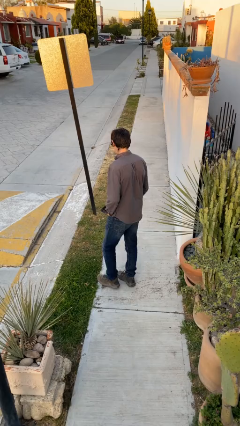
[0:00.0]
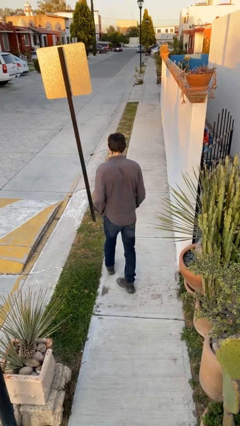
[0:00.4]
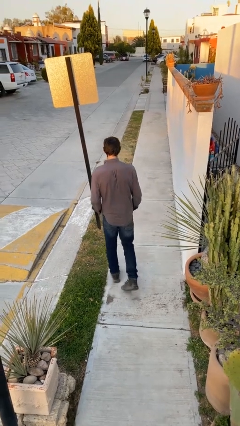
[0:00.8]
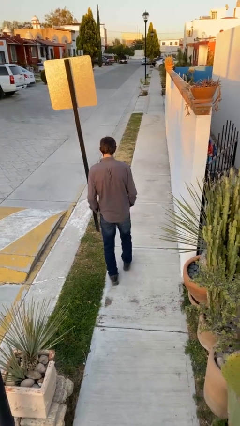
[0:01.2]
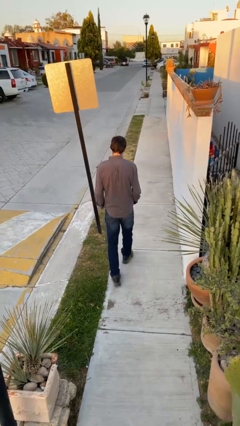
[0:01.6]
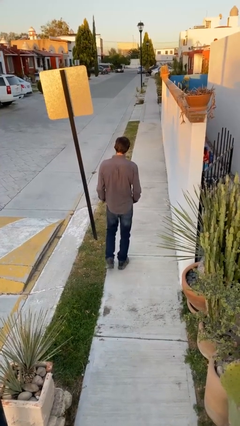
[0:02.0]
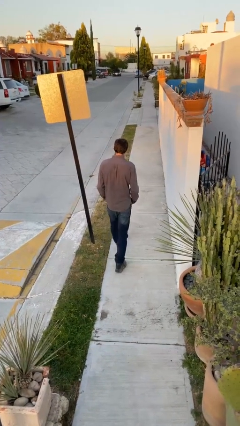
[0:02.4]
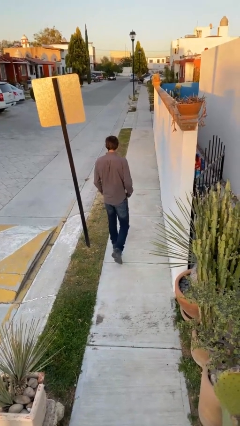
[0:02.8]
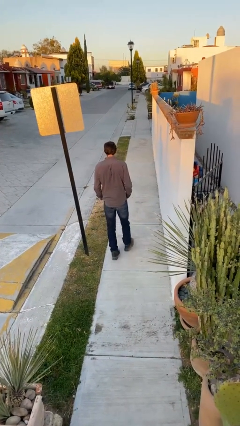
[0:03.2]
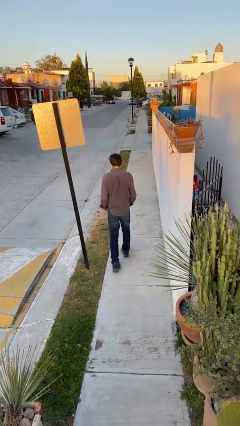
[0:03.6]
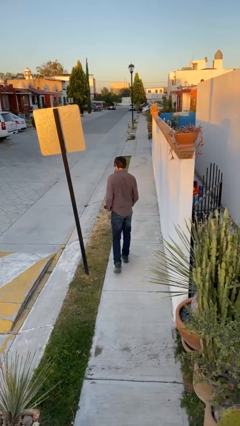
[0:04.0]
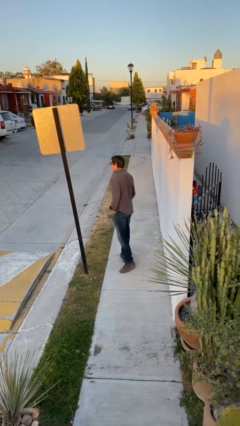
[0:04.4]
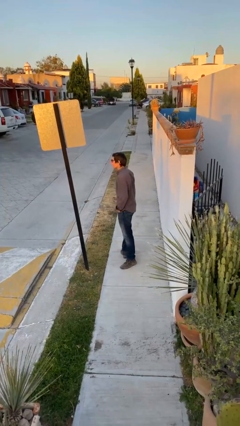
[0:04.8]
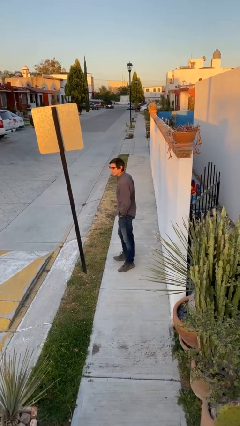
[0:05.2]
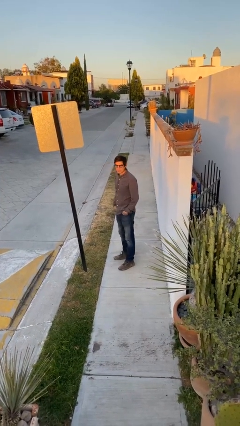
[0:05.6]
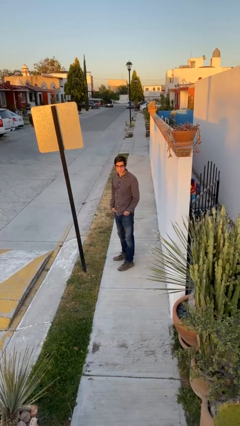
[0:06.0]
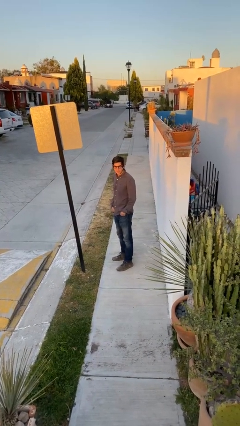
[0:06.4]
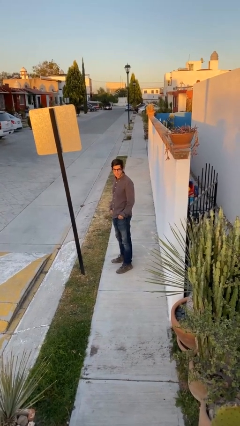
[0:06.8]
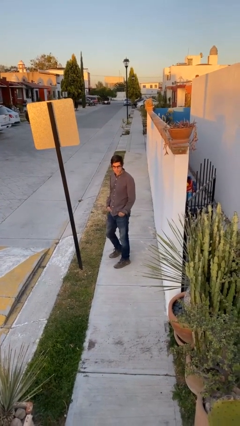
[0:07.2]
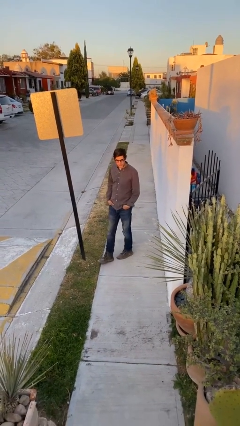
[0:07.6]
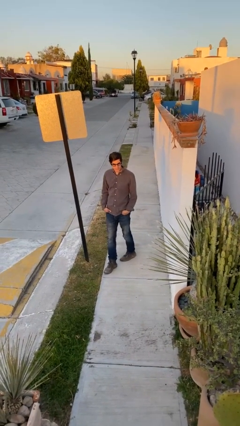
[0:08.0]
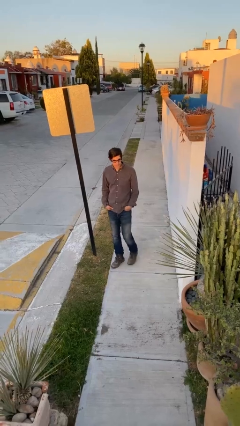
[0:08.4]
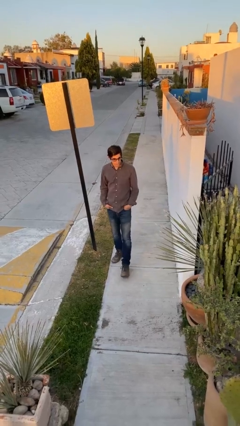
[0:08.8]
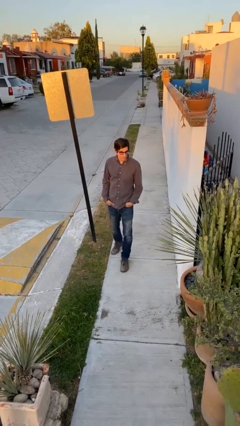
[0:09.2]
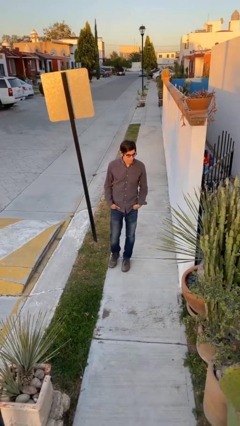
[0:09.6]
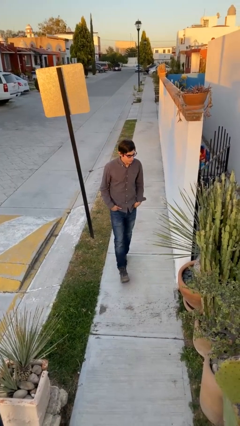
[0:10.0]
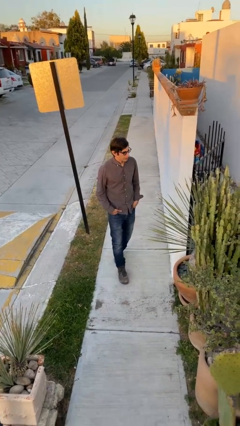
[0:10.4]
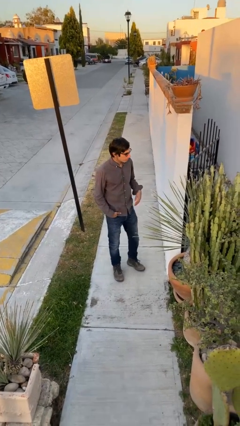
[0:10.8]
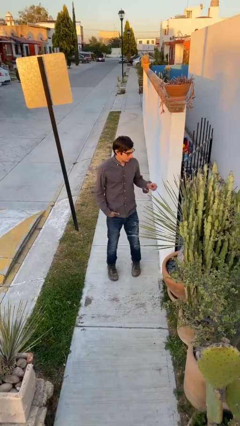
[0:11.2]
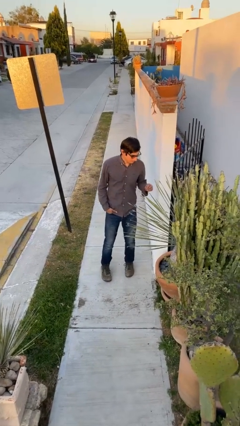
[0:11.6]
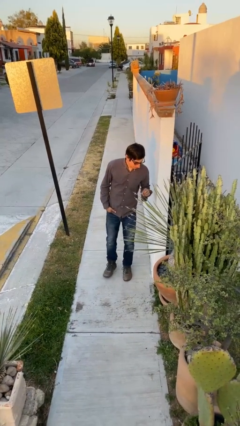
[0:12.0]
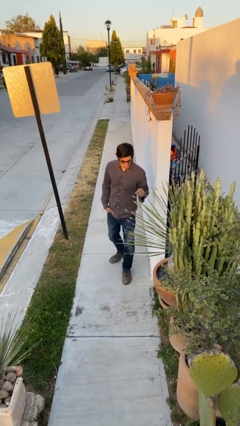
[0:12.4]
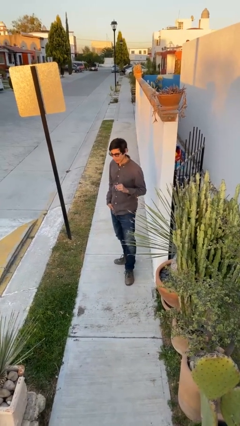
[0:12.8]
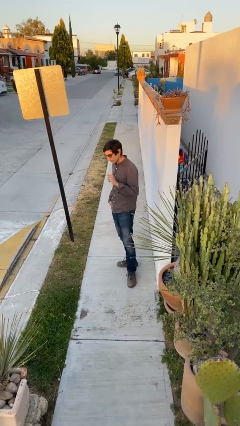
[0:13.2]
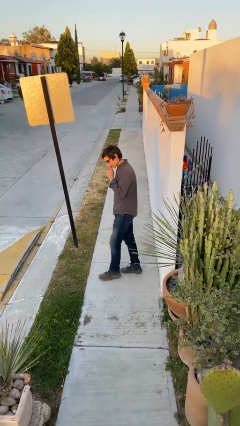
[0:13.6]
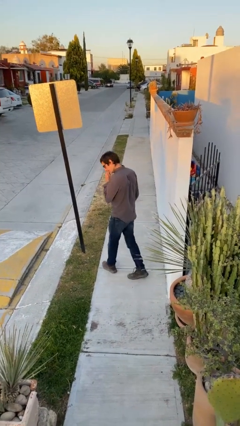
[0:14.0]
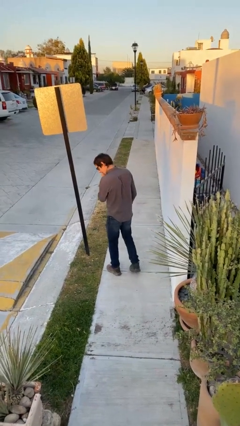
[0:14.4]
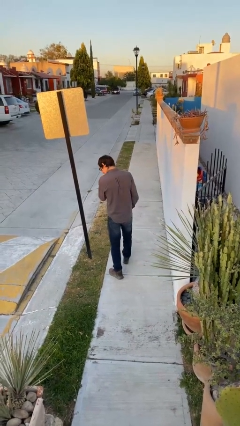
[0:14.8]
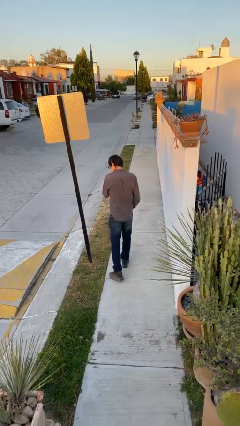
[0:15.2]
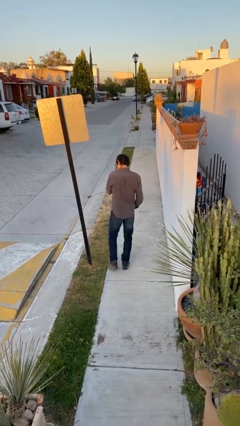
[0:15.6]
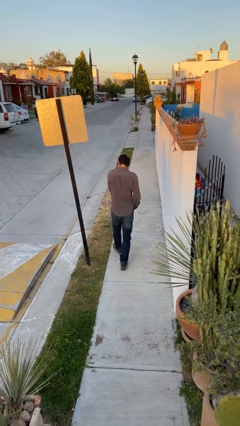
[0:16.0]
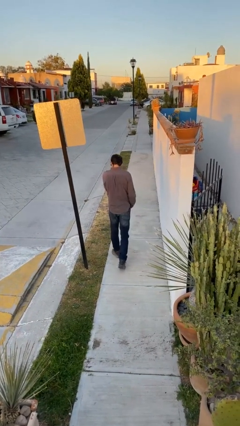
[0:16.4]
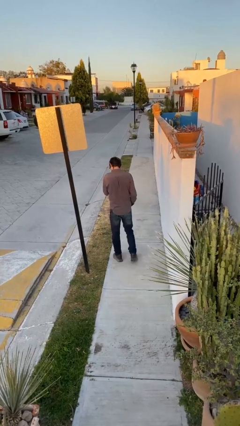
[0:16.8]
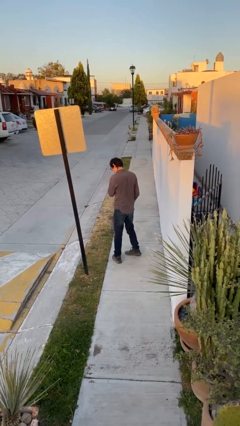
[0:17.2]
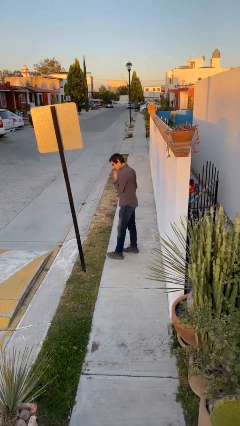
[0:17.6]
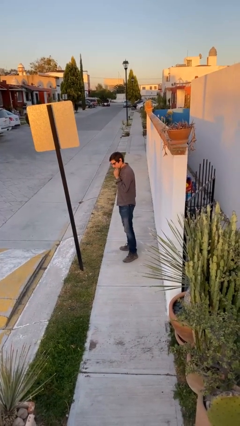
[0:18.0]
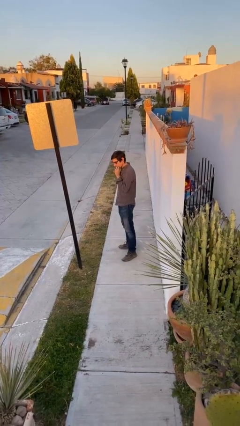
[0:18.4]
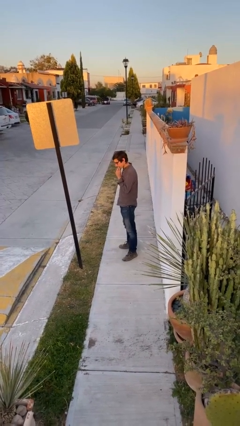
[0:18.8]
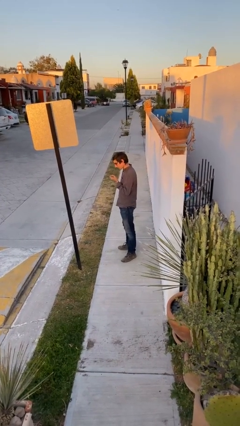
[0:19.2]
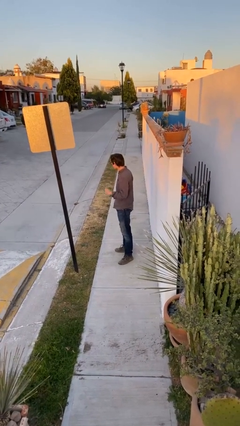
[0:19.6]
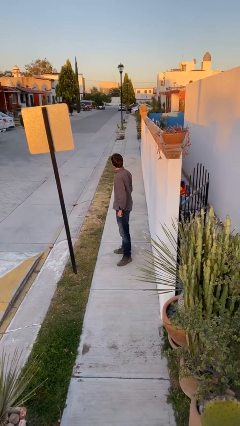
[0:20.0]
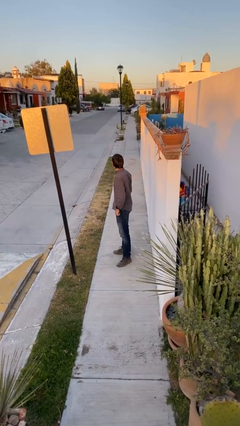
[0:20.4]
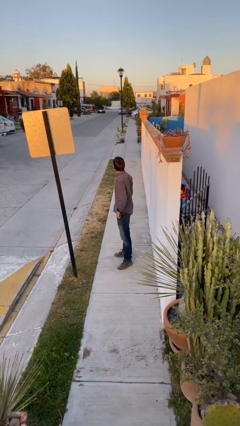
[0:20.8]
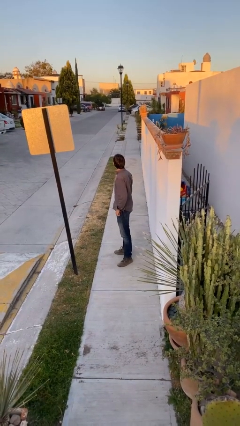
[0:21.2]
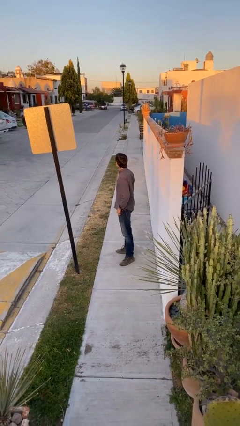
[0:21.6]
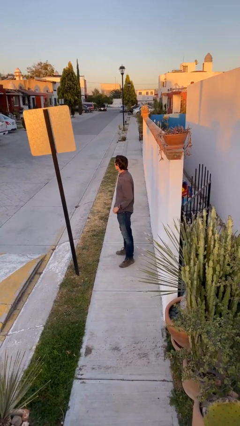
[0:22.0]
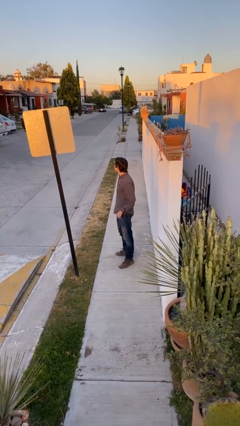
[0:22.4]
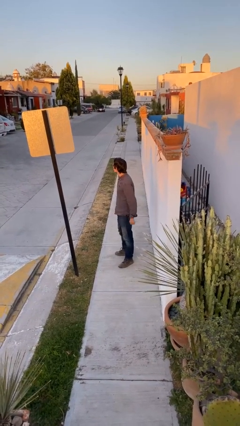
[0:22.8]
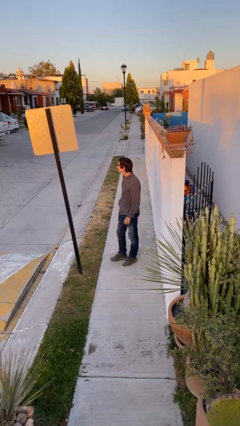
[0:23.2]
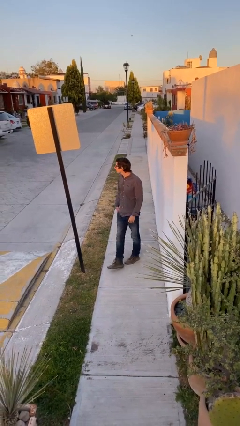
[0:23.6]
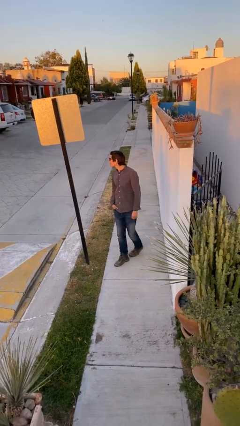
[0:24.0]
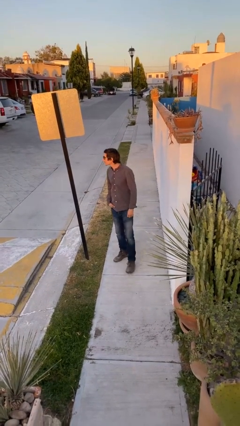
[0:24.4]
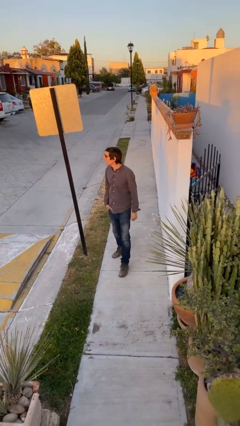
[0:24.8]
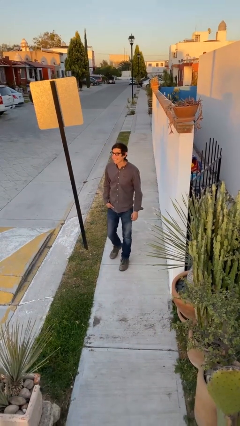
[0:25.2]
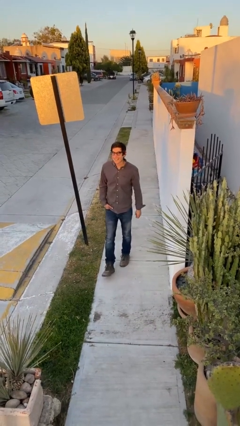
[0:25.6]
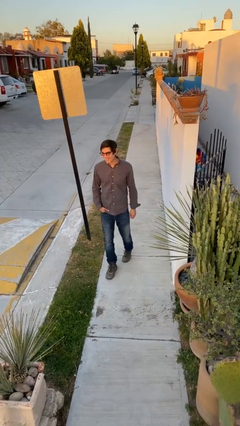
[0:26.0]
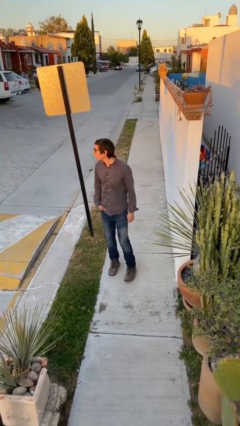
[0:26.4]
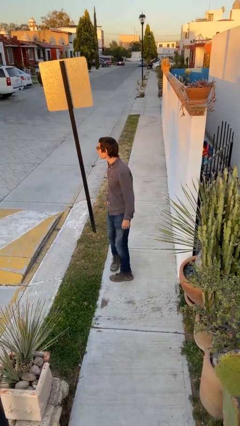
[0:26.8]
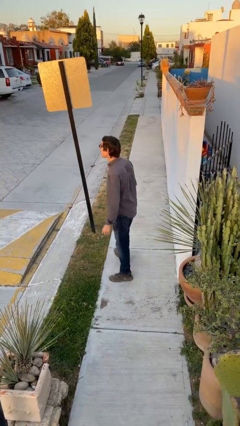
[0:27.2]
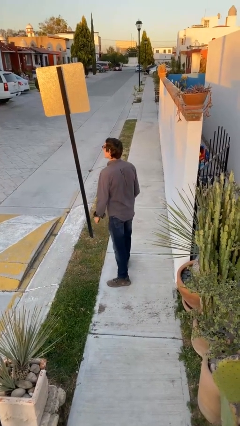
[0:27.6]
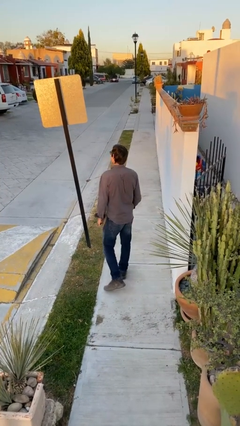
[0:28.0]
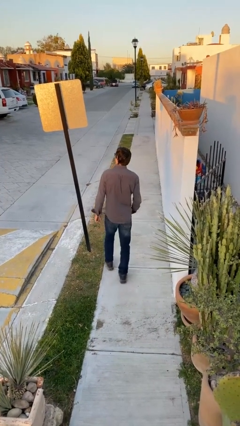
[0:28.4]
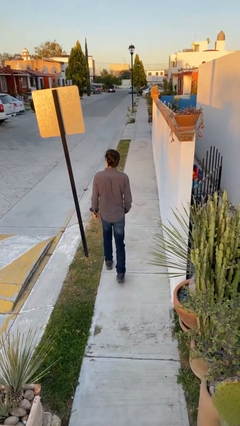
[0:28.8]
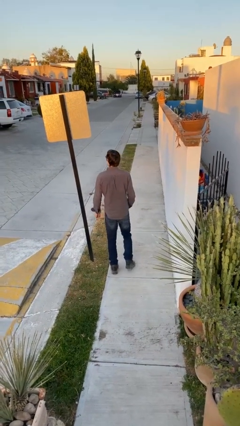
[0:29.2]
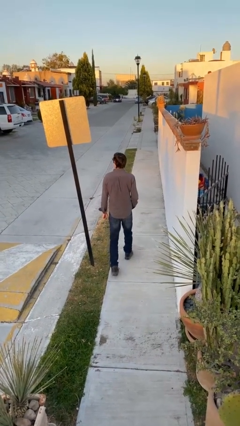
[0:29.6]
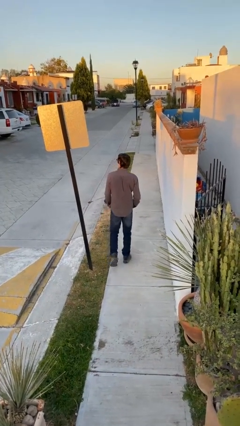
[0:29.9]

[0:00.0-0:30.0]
person walks

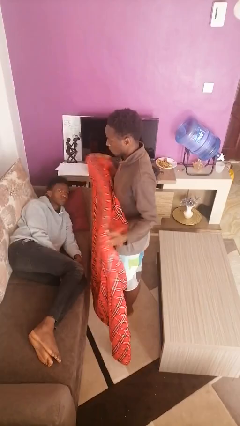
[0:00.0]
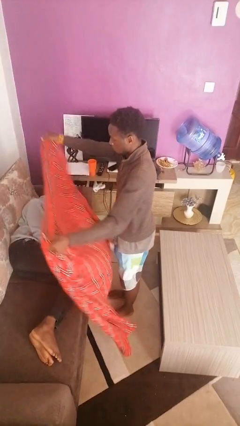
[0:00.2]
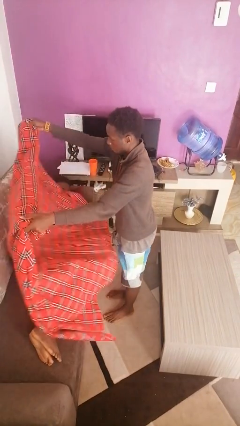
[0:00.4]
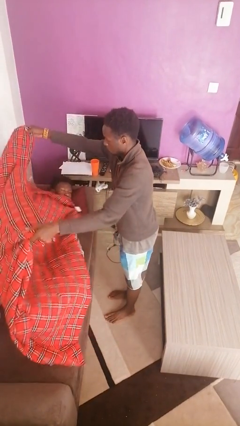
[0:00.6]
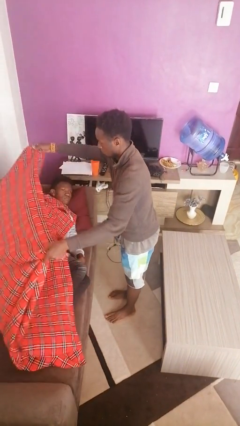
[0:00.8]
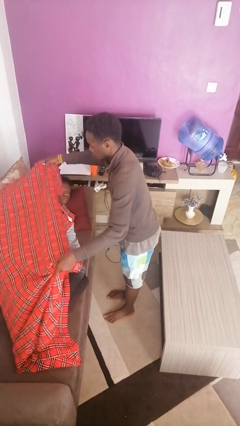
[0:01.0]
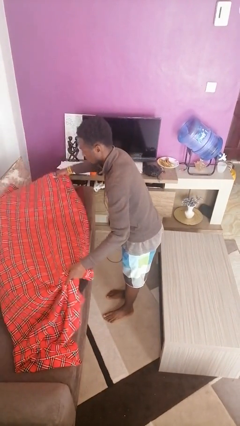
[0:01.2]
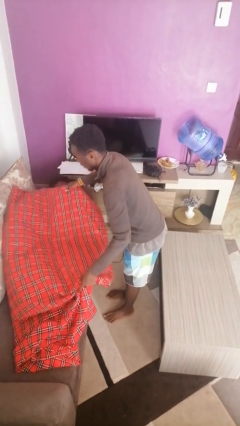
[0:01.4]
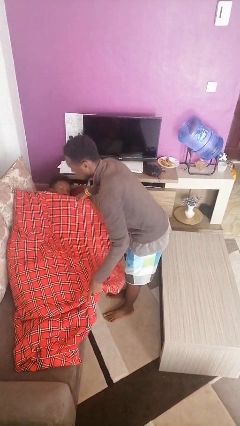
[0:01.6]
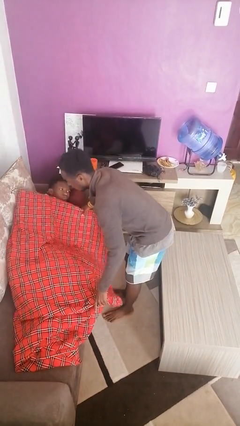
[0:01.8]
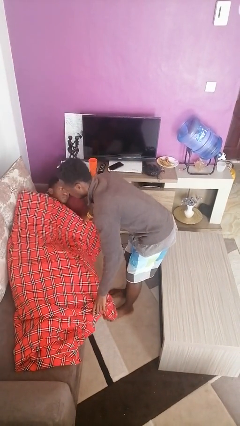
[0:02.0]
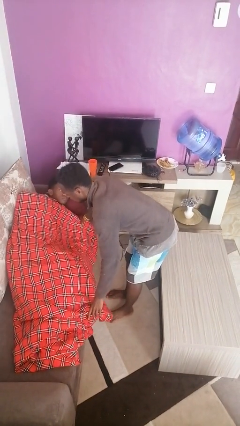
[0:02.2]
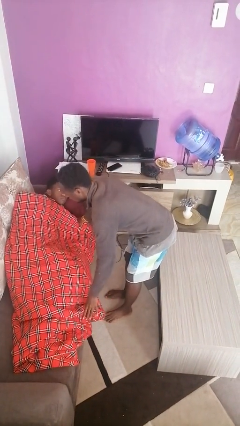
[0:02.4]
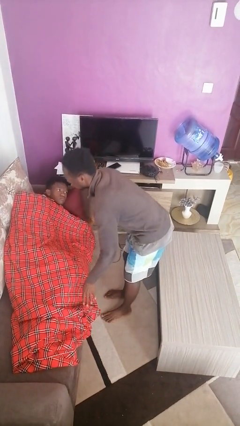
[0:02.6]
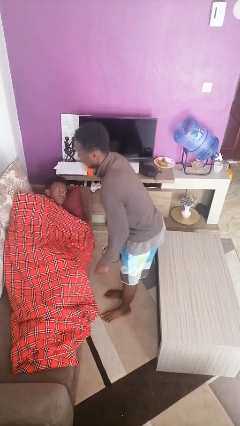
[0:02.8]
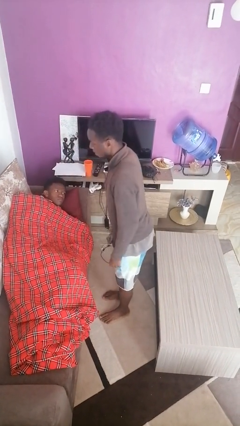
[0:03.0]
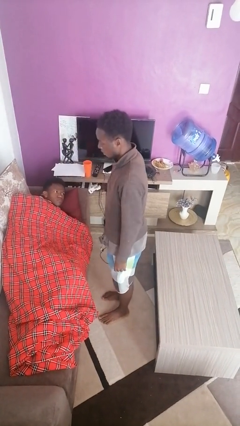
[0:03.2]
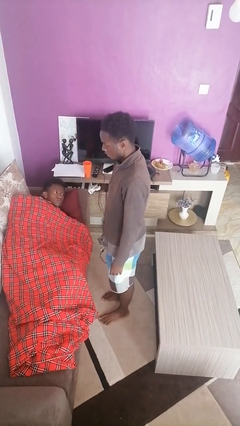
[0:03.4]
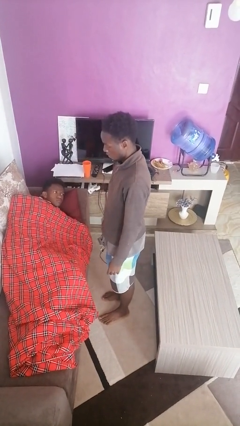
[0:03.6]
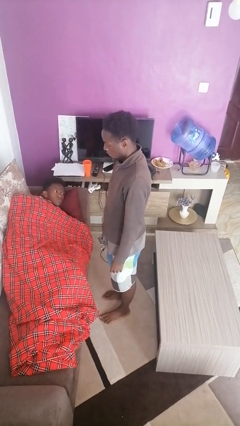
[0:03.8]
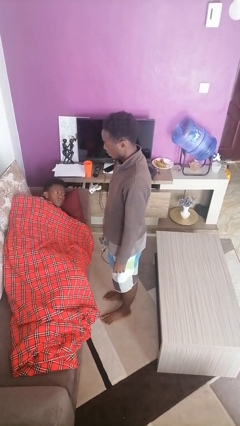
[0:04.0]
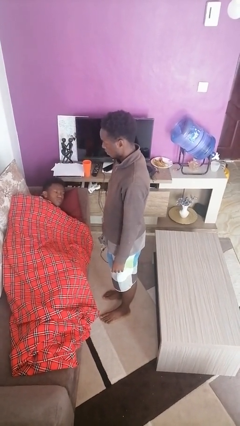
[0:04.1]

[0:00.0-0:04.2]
person covers friend with blanket
